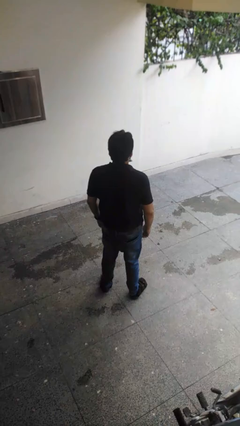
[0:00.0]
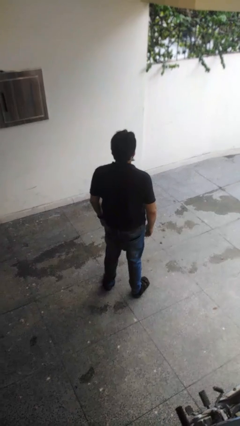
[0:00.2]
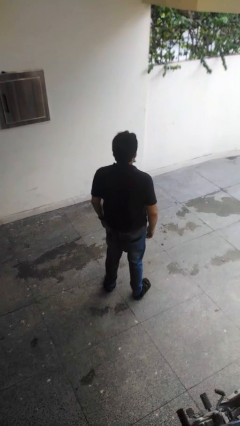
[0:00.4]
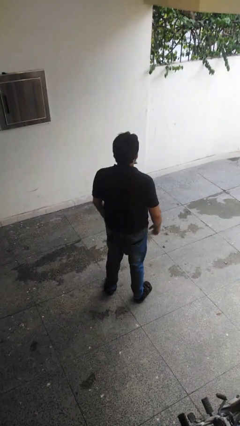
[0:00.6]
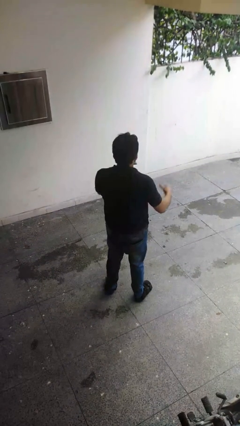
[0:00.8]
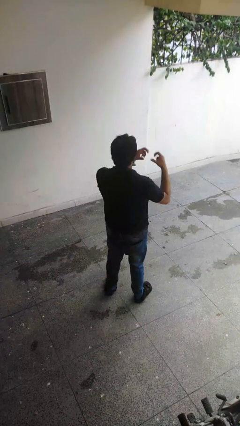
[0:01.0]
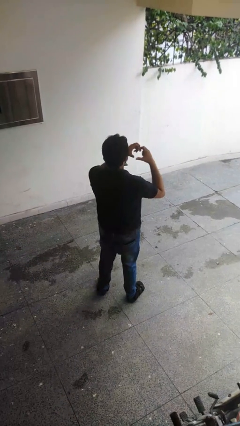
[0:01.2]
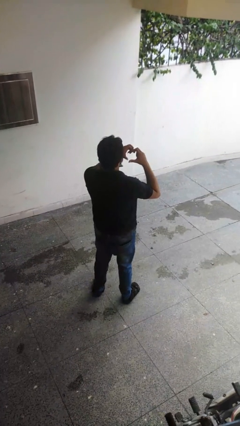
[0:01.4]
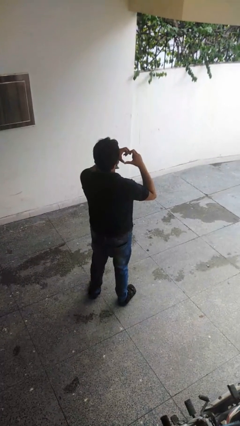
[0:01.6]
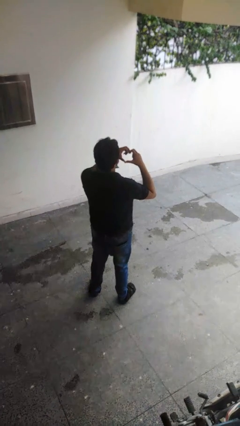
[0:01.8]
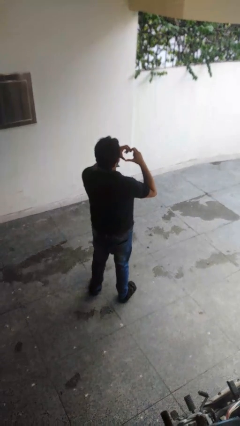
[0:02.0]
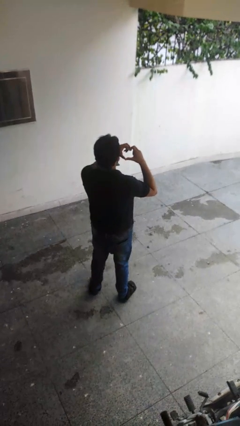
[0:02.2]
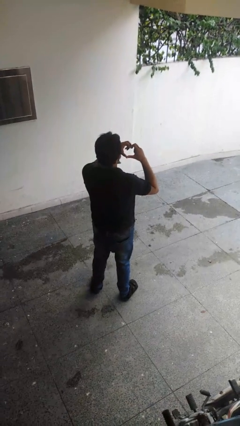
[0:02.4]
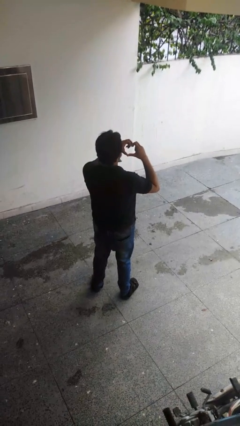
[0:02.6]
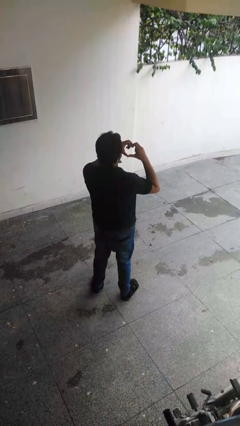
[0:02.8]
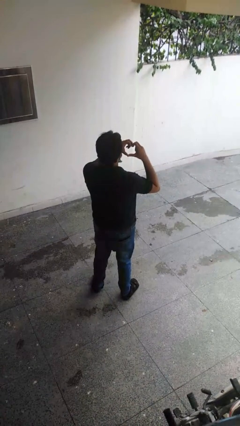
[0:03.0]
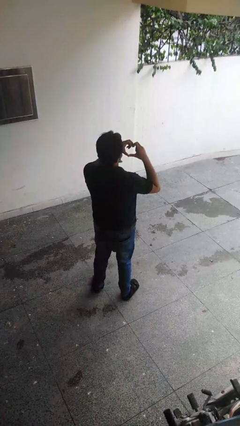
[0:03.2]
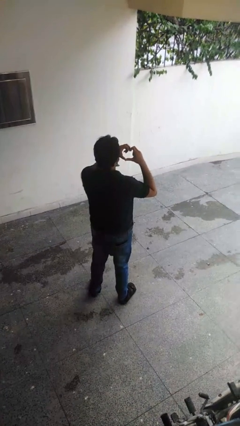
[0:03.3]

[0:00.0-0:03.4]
person gestures heart

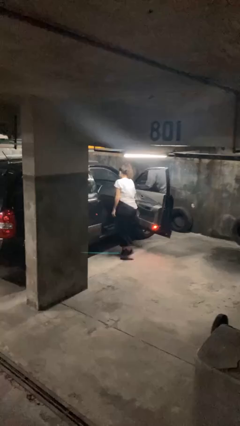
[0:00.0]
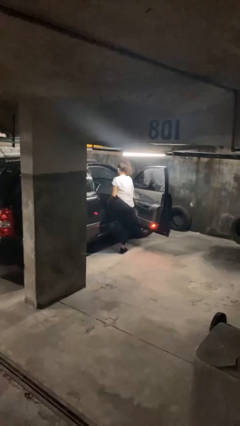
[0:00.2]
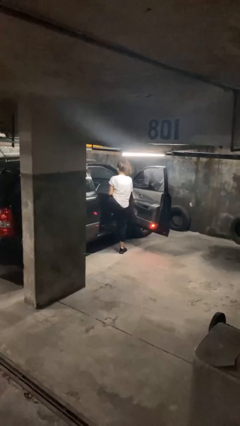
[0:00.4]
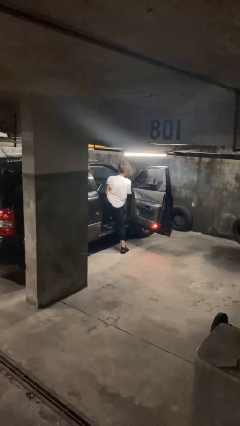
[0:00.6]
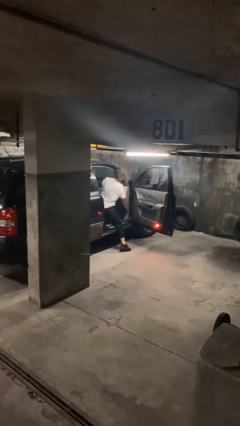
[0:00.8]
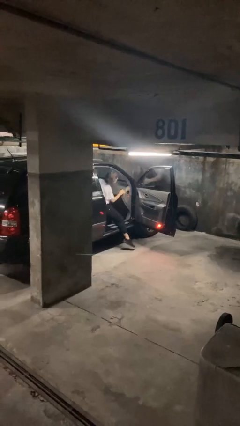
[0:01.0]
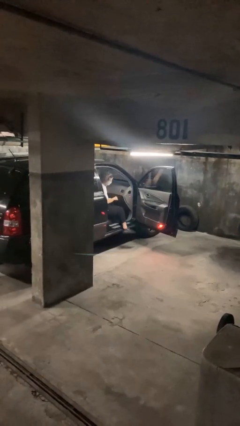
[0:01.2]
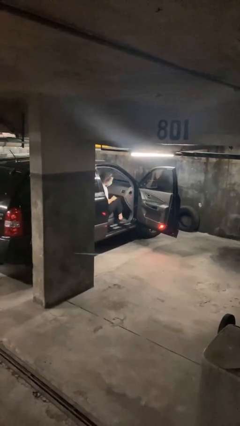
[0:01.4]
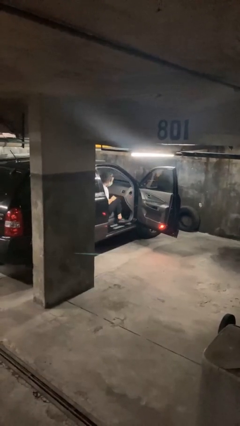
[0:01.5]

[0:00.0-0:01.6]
person enters car

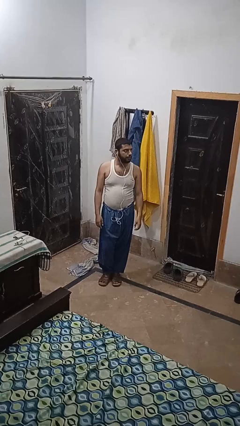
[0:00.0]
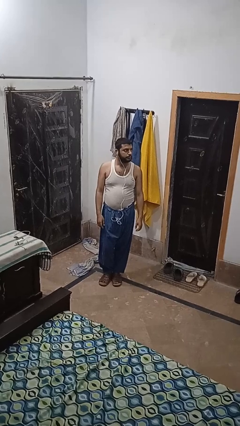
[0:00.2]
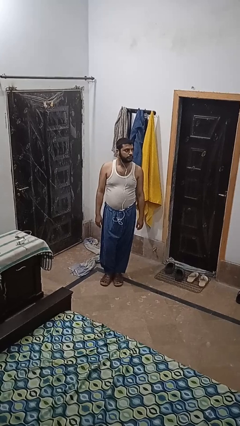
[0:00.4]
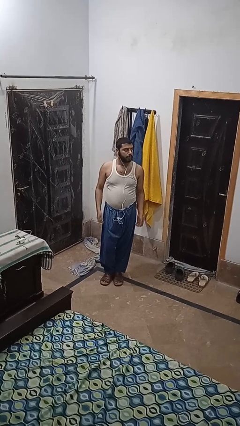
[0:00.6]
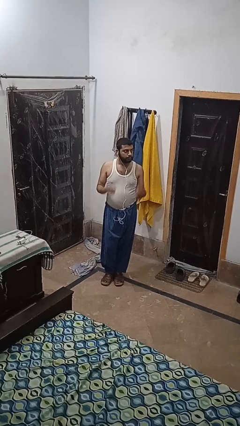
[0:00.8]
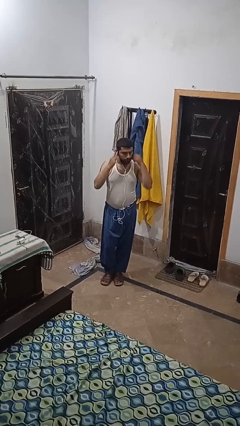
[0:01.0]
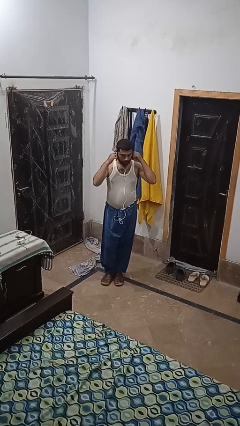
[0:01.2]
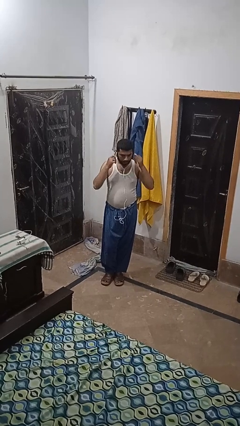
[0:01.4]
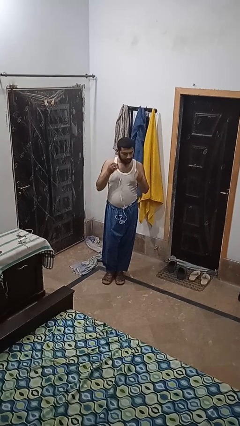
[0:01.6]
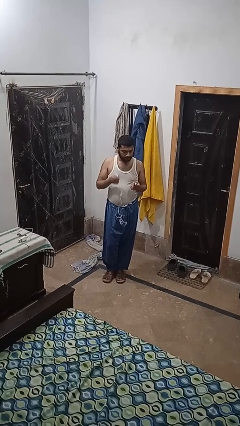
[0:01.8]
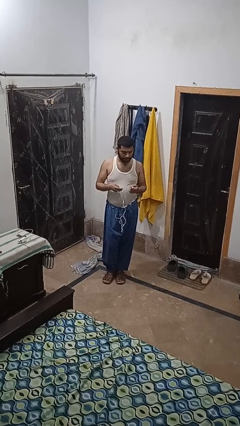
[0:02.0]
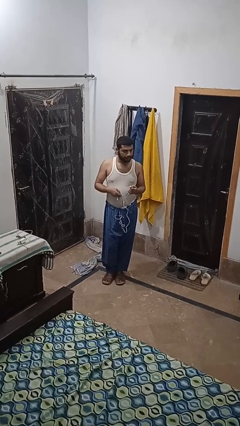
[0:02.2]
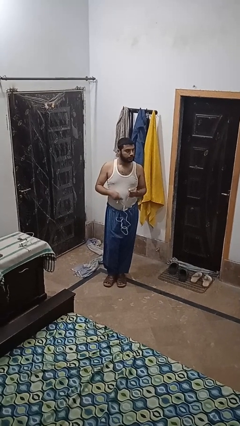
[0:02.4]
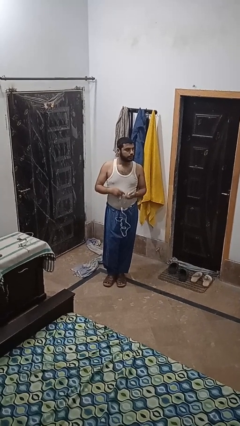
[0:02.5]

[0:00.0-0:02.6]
person takes off headphones

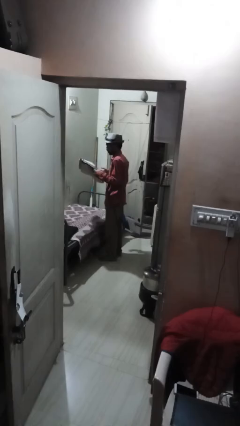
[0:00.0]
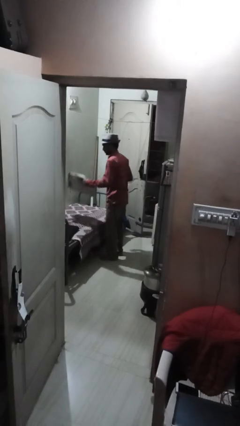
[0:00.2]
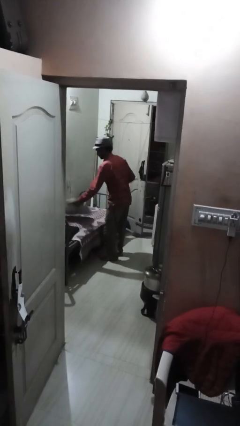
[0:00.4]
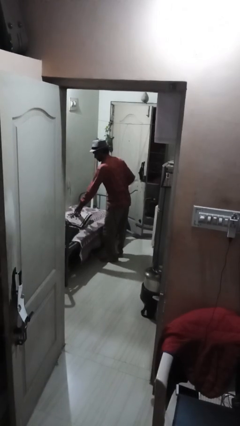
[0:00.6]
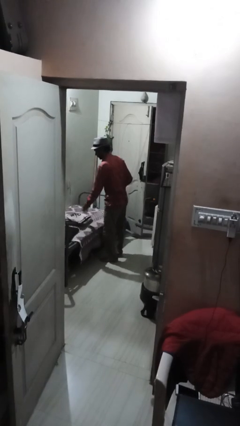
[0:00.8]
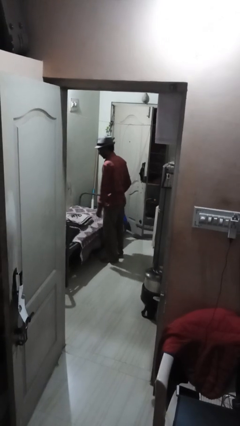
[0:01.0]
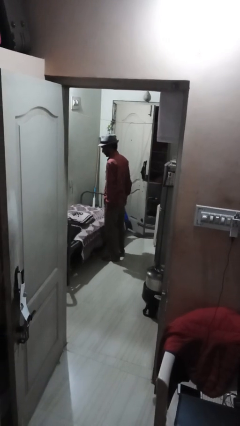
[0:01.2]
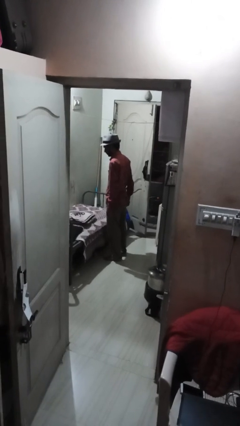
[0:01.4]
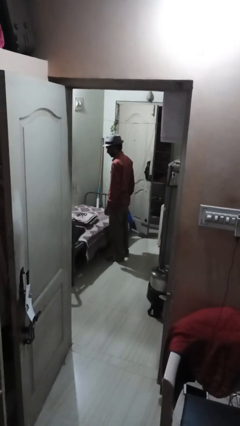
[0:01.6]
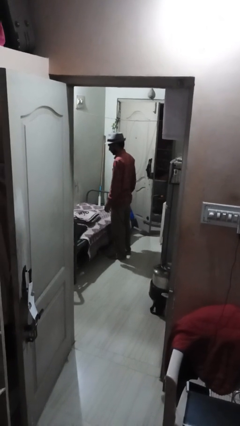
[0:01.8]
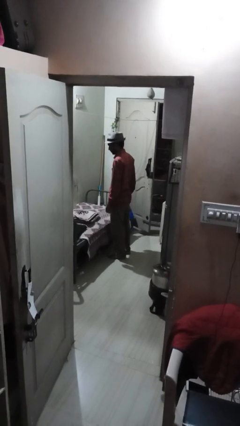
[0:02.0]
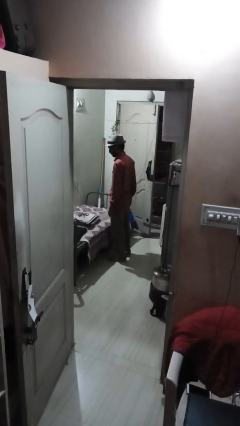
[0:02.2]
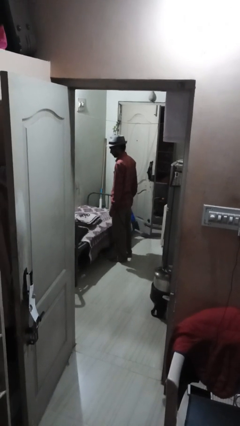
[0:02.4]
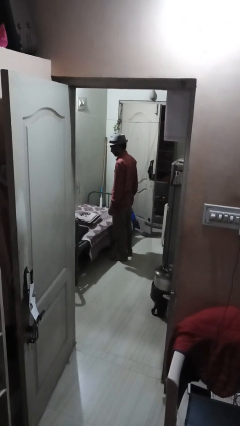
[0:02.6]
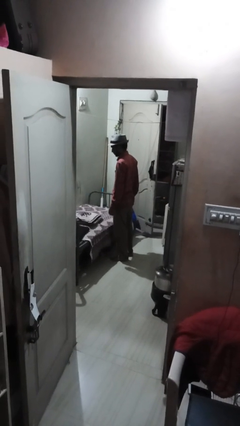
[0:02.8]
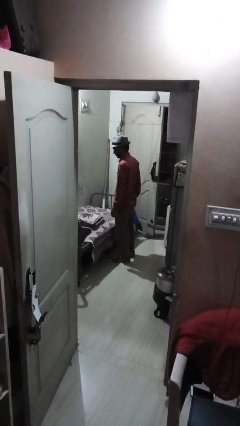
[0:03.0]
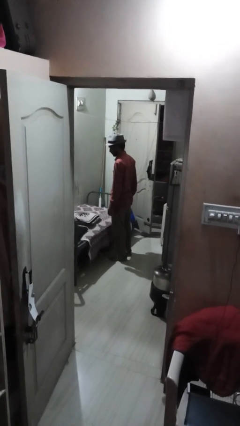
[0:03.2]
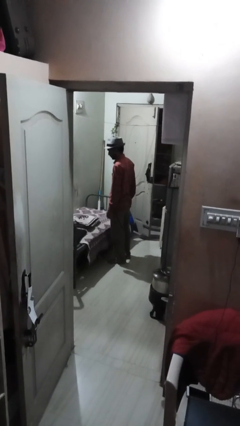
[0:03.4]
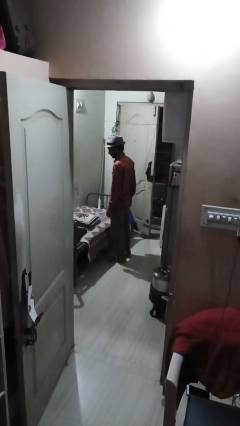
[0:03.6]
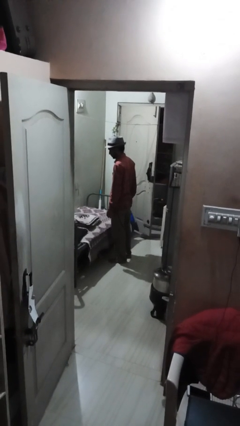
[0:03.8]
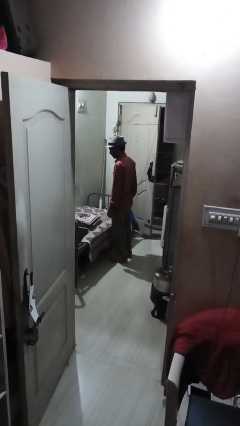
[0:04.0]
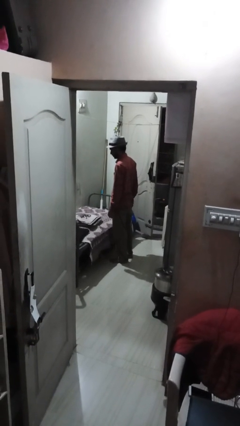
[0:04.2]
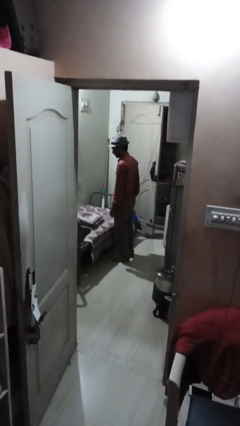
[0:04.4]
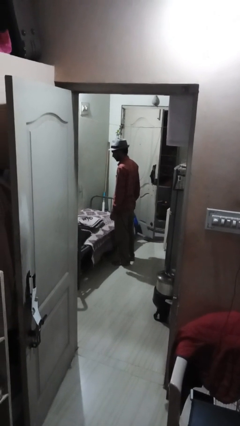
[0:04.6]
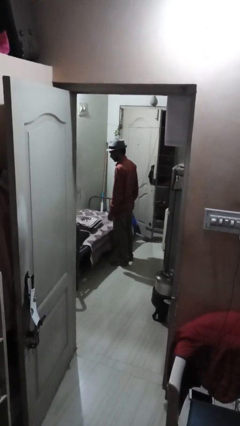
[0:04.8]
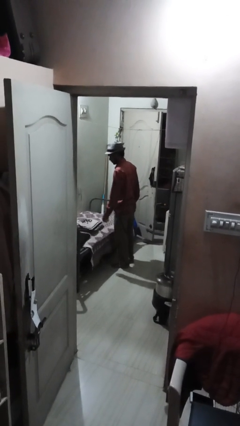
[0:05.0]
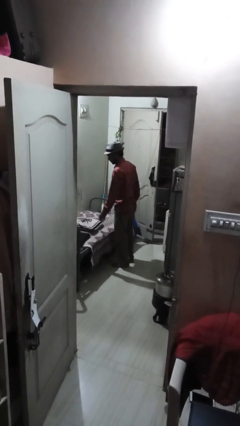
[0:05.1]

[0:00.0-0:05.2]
person puts down object on bed

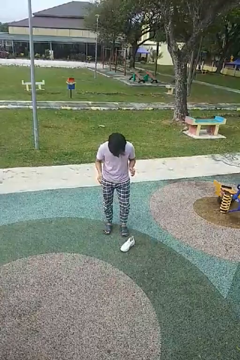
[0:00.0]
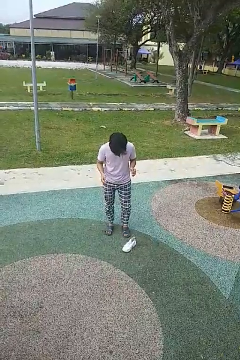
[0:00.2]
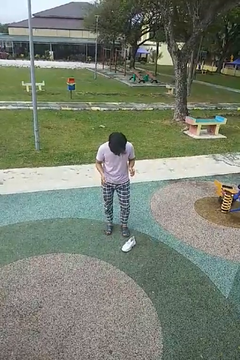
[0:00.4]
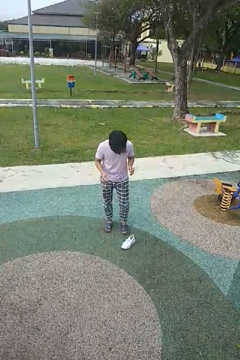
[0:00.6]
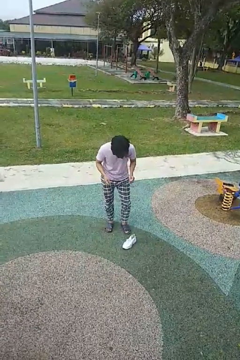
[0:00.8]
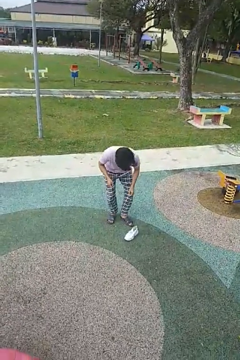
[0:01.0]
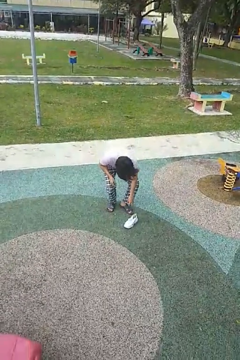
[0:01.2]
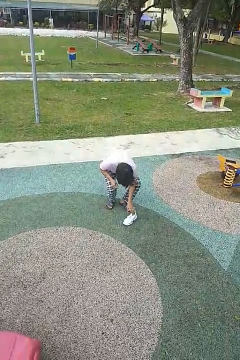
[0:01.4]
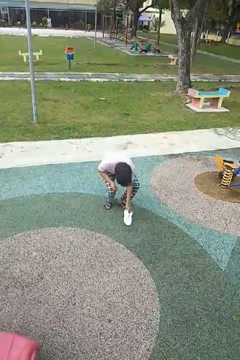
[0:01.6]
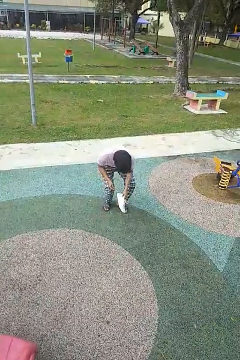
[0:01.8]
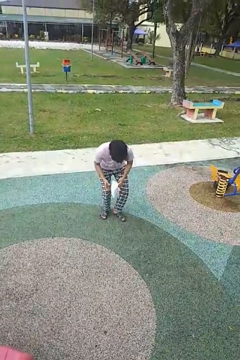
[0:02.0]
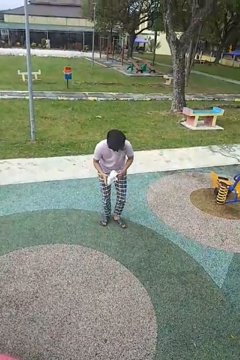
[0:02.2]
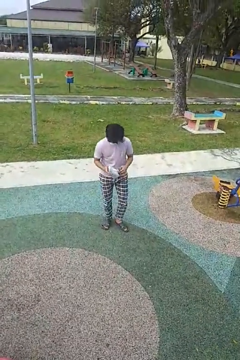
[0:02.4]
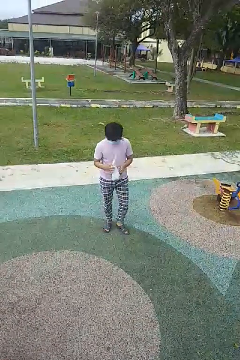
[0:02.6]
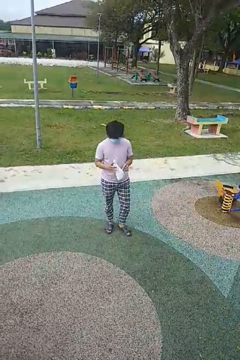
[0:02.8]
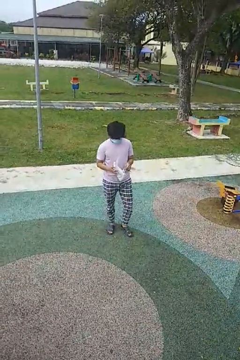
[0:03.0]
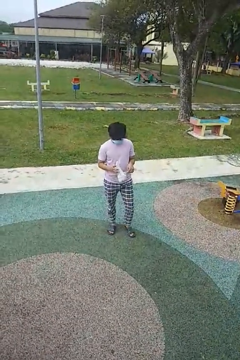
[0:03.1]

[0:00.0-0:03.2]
person picks up object from floor

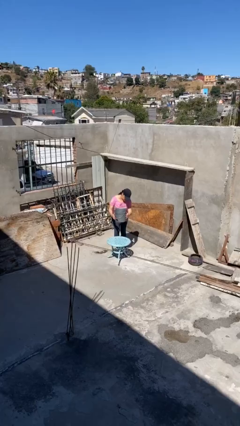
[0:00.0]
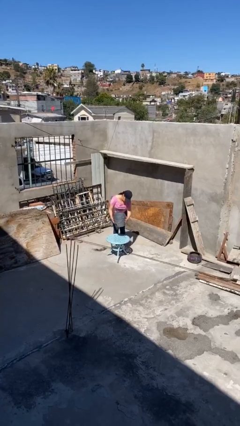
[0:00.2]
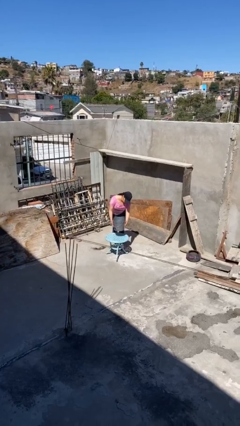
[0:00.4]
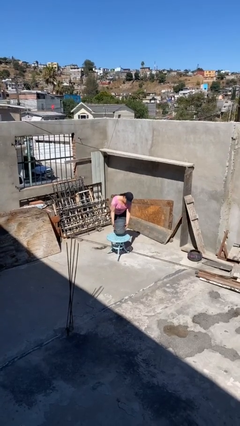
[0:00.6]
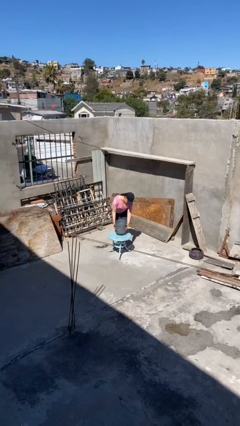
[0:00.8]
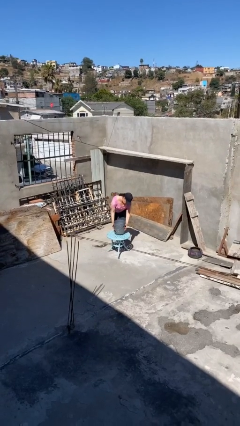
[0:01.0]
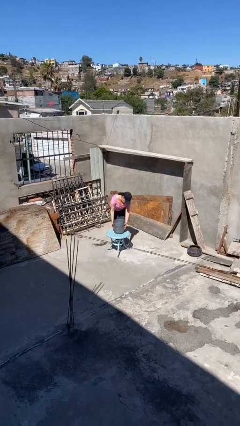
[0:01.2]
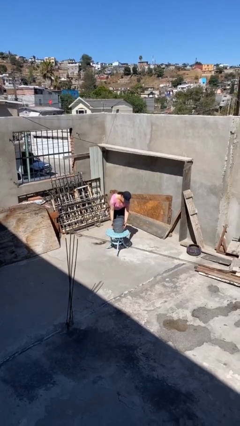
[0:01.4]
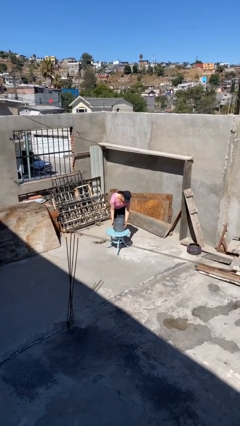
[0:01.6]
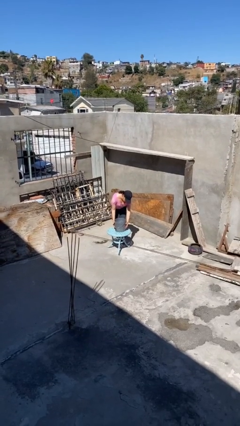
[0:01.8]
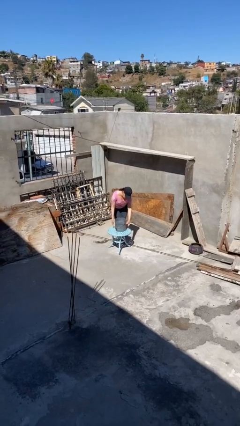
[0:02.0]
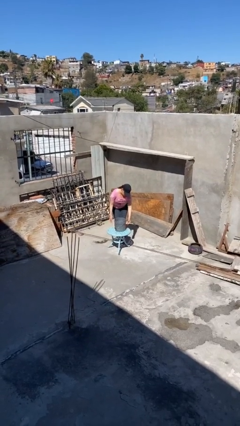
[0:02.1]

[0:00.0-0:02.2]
person puts down object on table
